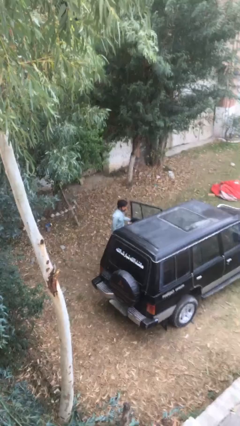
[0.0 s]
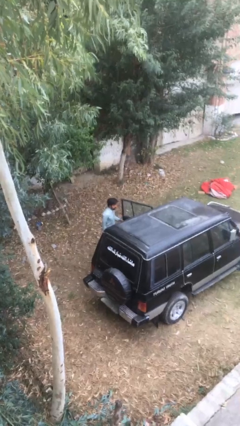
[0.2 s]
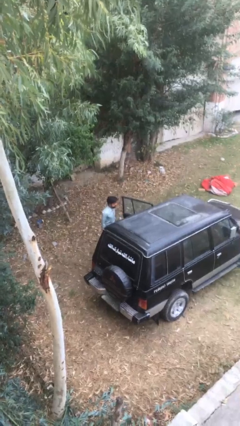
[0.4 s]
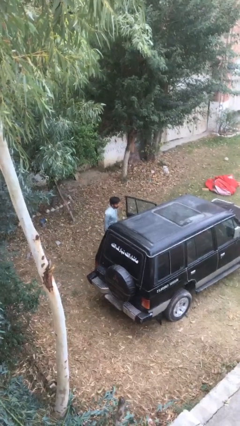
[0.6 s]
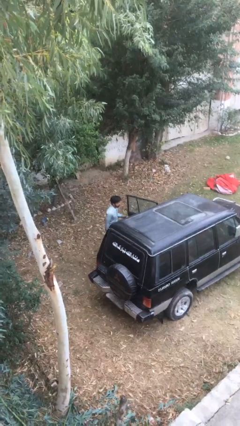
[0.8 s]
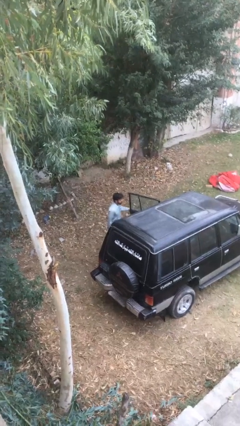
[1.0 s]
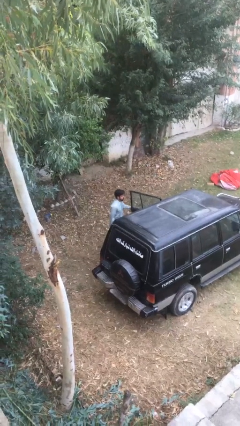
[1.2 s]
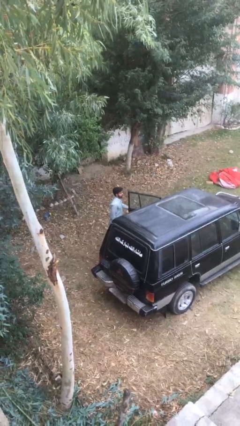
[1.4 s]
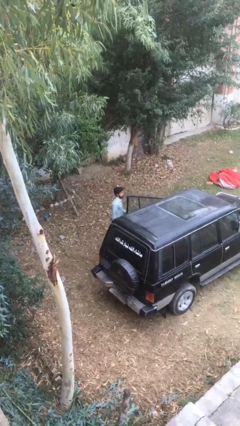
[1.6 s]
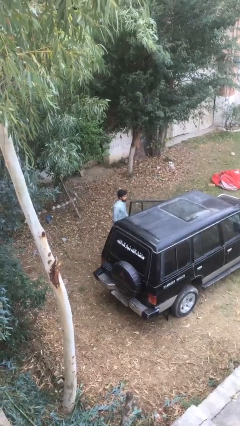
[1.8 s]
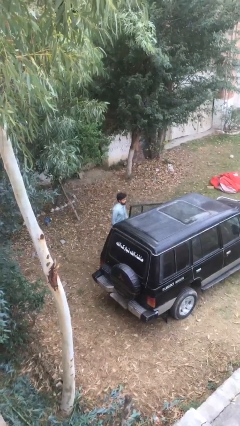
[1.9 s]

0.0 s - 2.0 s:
person opens car door

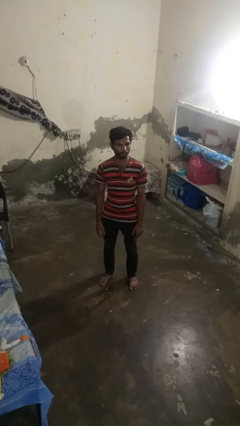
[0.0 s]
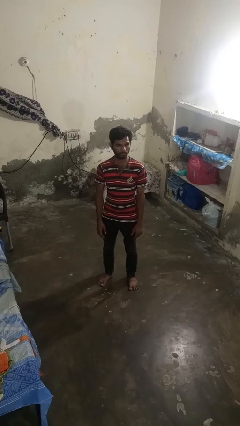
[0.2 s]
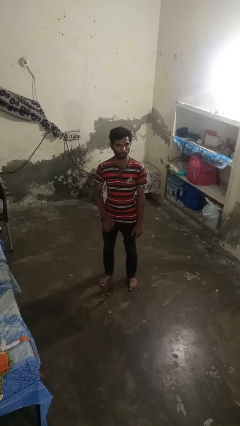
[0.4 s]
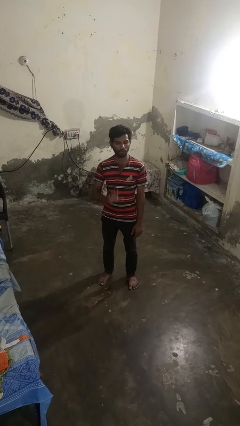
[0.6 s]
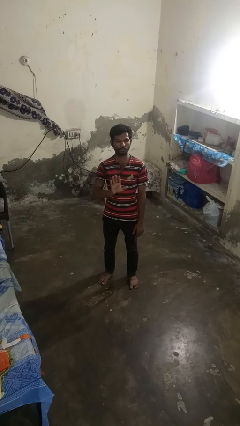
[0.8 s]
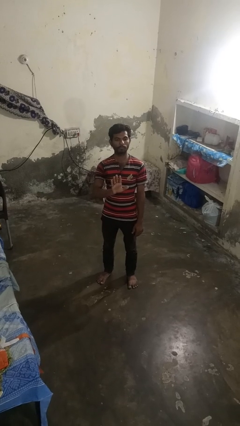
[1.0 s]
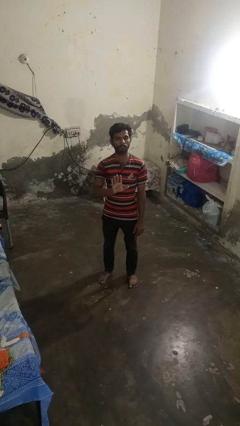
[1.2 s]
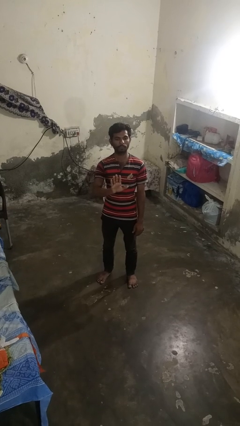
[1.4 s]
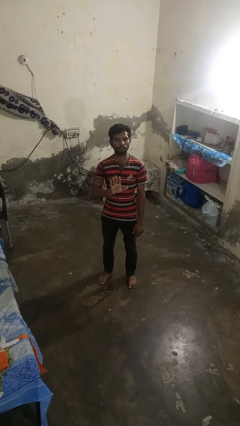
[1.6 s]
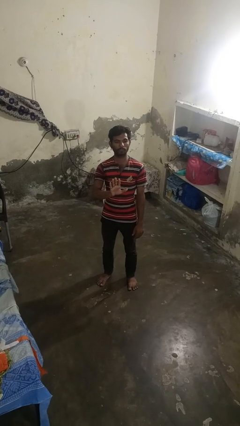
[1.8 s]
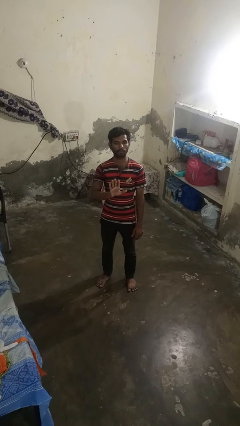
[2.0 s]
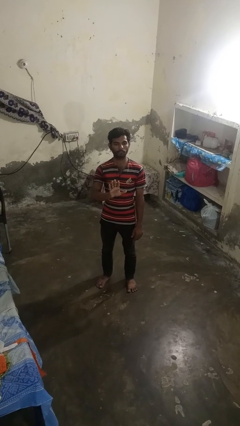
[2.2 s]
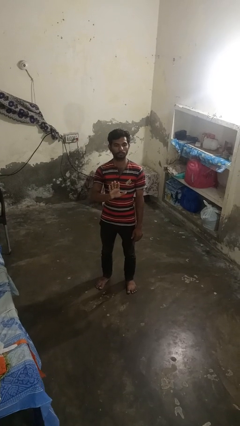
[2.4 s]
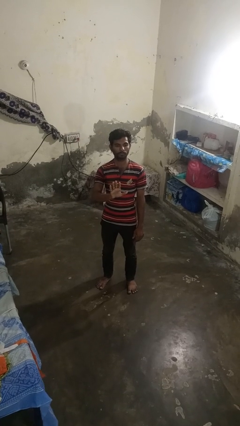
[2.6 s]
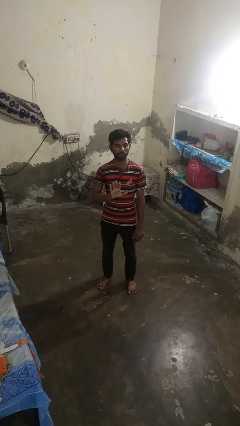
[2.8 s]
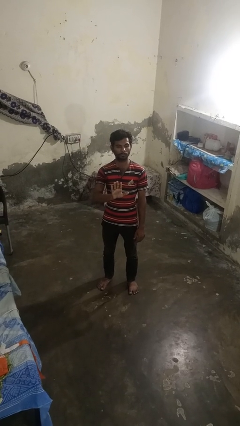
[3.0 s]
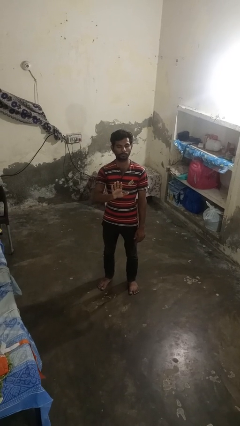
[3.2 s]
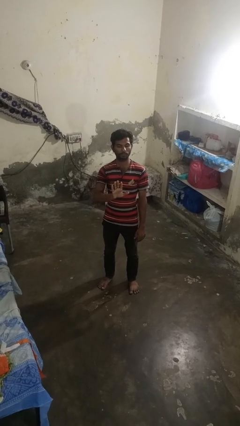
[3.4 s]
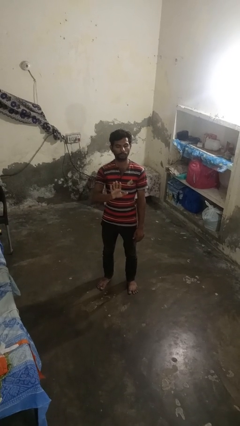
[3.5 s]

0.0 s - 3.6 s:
person gestures stop

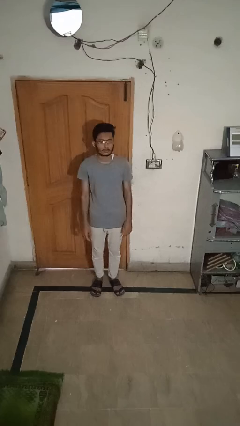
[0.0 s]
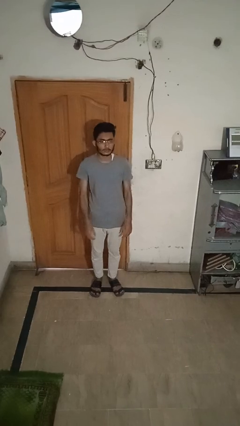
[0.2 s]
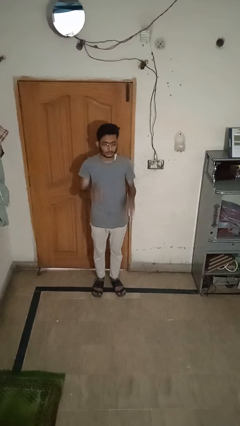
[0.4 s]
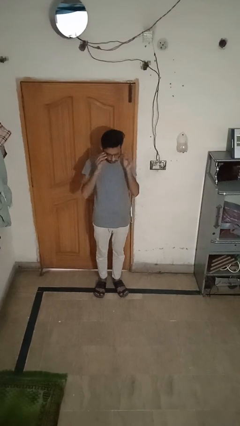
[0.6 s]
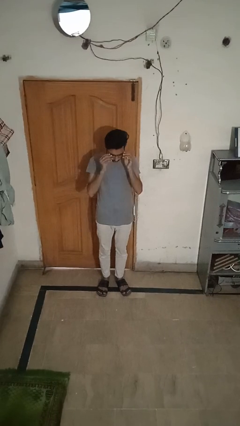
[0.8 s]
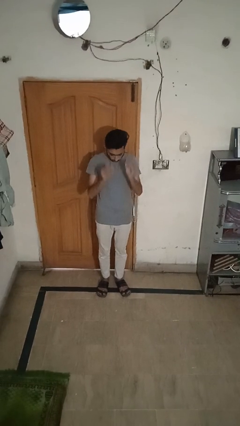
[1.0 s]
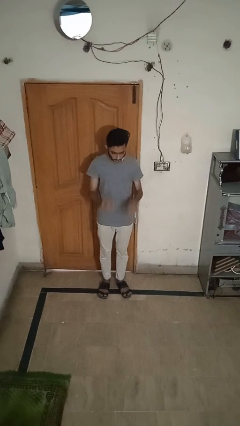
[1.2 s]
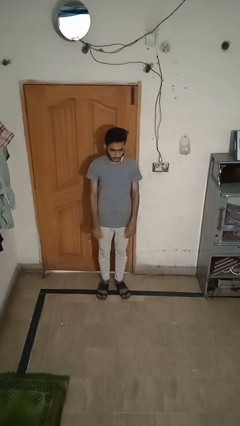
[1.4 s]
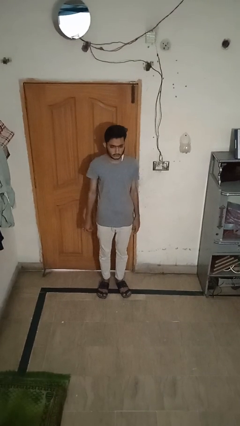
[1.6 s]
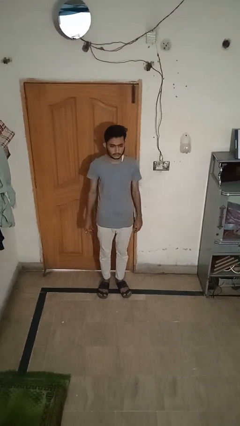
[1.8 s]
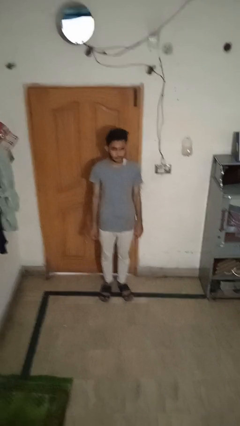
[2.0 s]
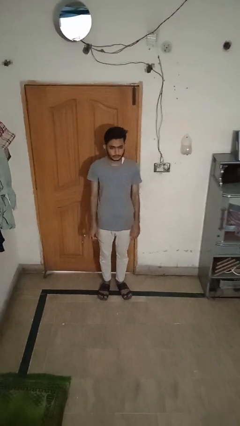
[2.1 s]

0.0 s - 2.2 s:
person takes off glasses

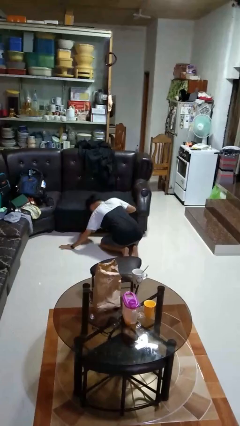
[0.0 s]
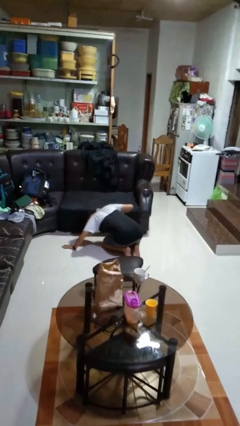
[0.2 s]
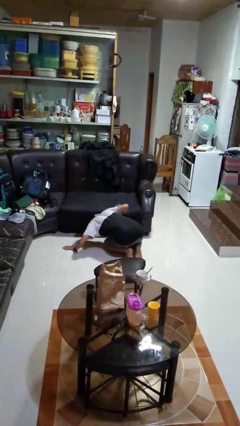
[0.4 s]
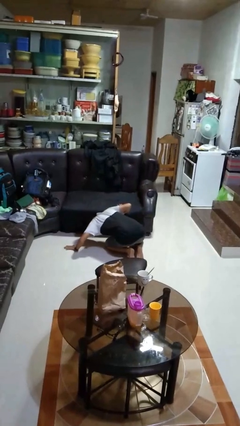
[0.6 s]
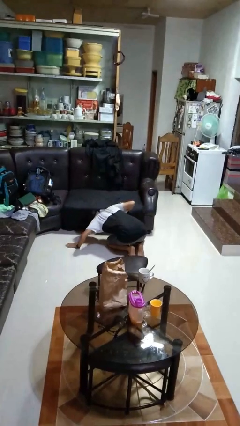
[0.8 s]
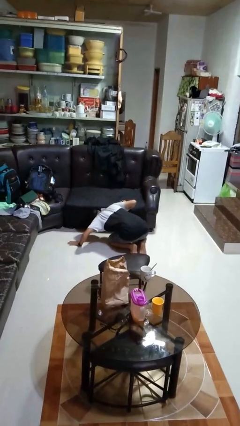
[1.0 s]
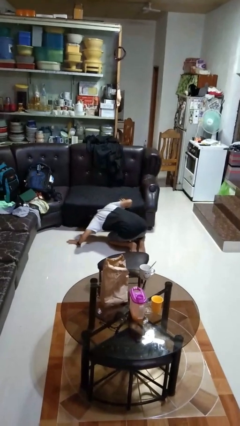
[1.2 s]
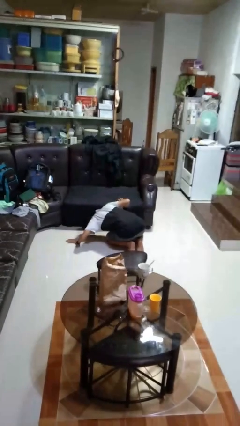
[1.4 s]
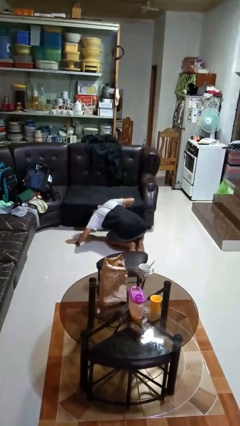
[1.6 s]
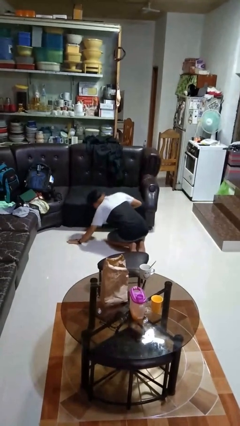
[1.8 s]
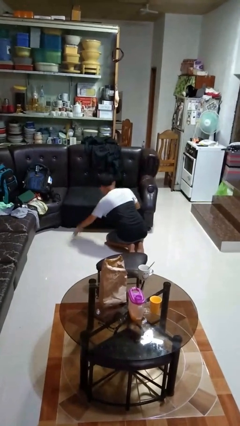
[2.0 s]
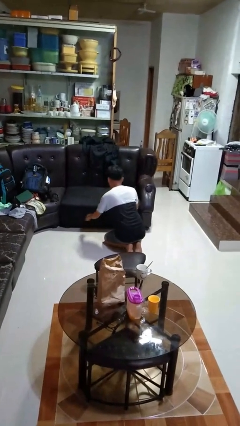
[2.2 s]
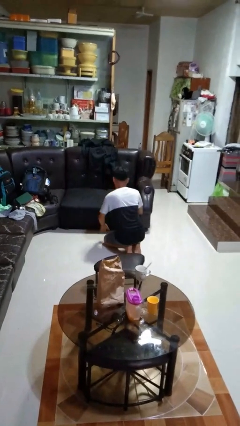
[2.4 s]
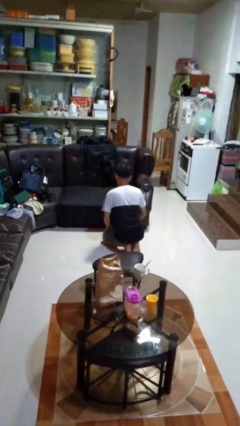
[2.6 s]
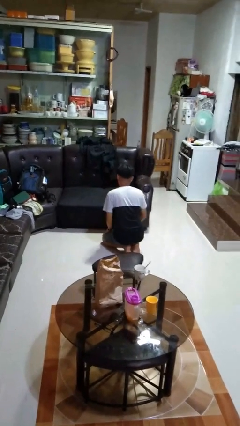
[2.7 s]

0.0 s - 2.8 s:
person searches under couch

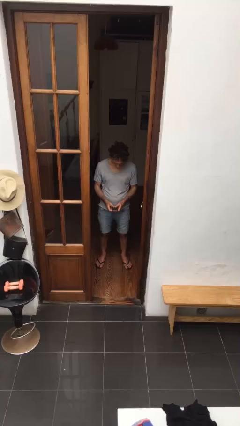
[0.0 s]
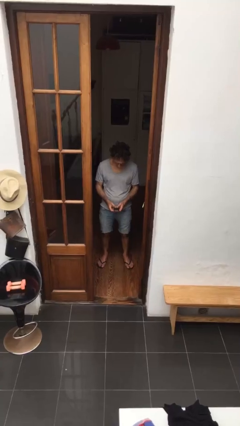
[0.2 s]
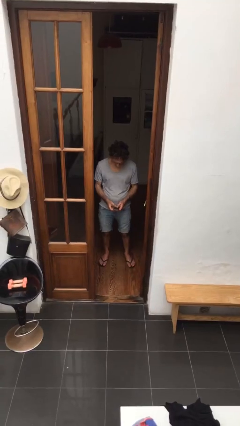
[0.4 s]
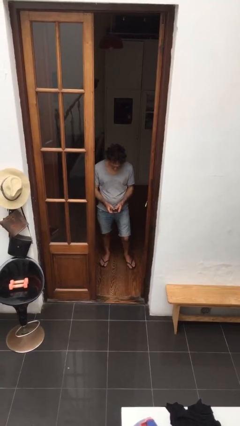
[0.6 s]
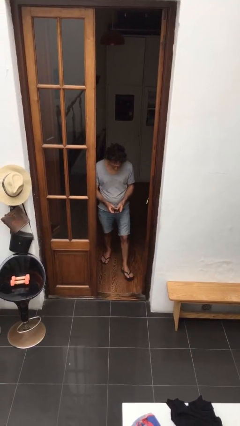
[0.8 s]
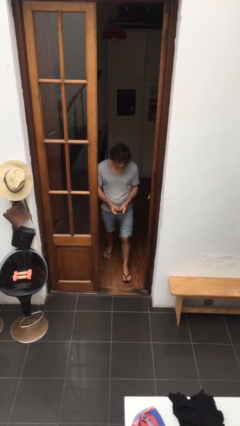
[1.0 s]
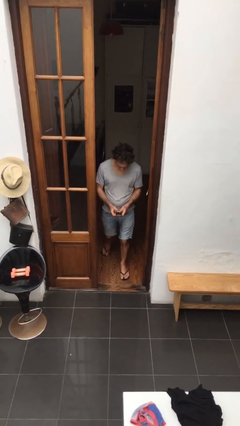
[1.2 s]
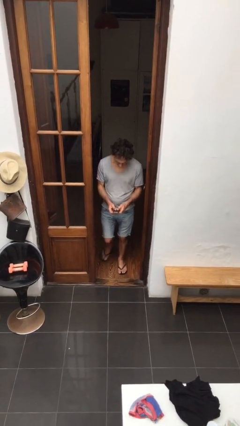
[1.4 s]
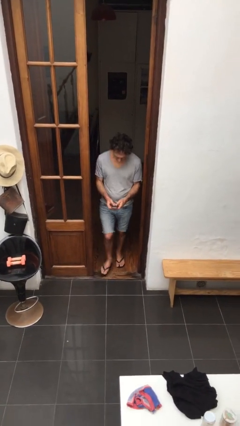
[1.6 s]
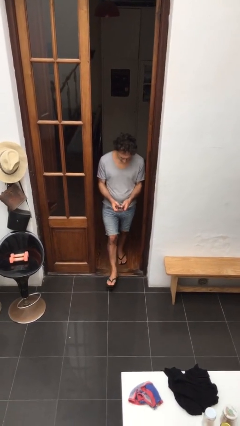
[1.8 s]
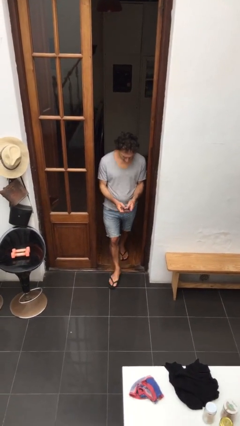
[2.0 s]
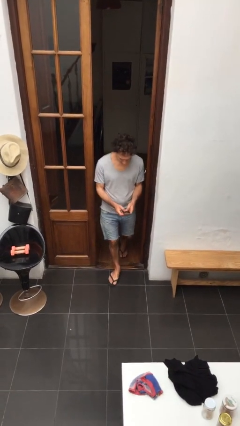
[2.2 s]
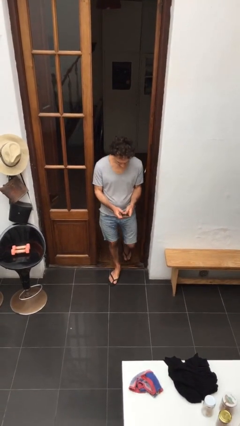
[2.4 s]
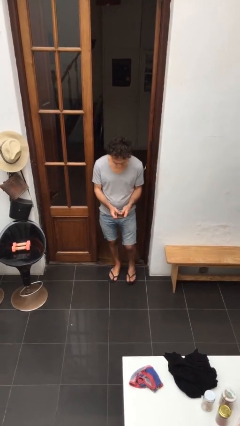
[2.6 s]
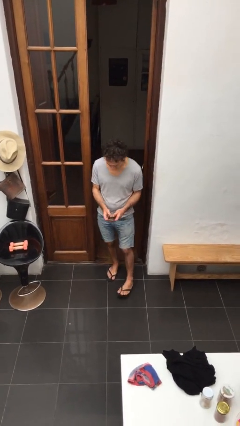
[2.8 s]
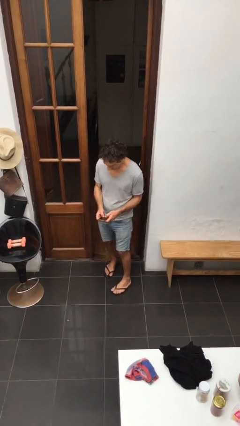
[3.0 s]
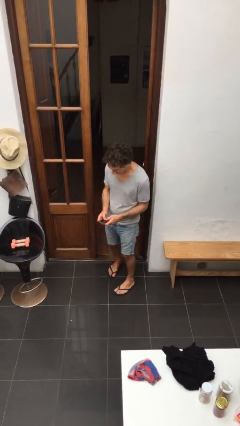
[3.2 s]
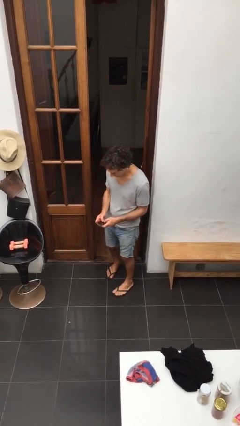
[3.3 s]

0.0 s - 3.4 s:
person enters scene through structure

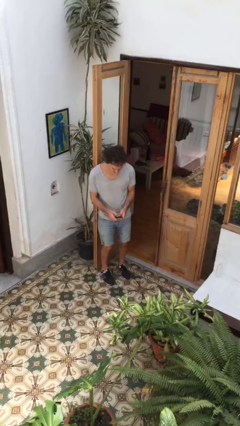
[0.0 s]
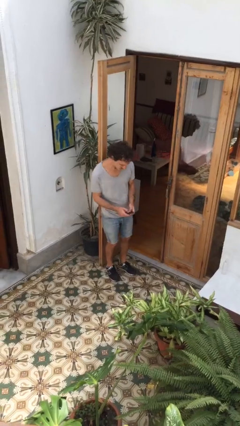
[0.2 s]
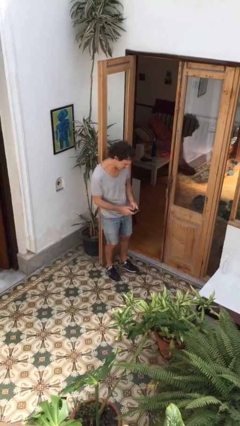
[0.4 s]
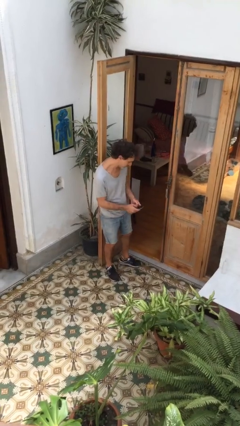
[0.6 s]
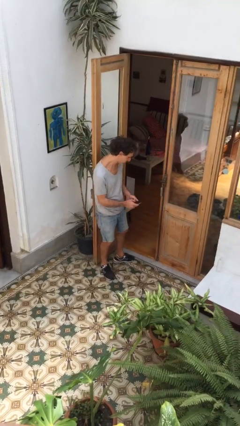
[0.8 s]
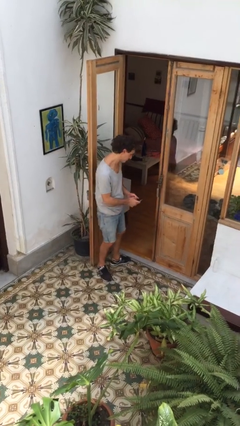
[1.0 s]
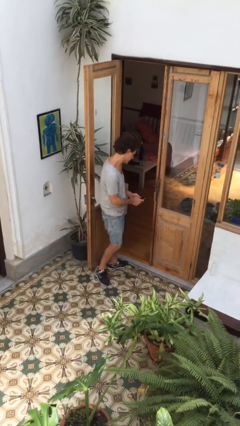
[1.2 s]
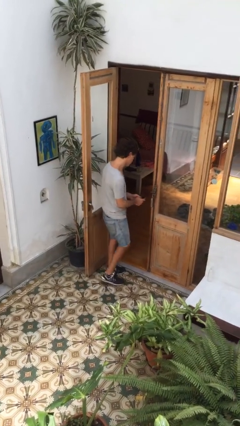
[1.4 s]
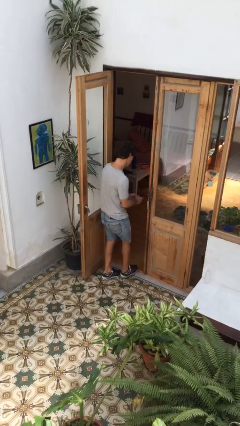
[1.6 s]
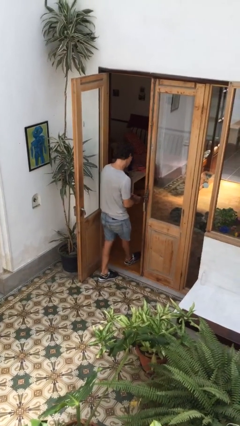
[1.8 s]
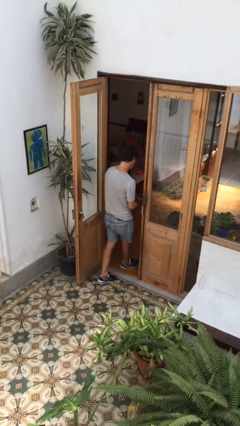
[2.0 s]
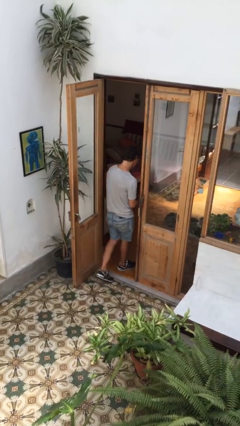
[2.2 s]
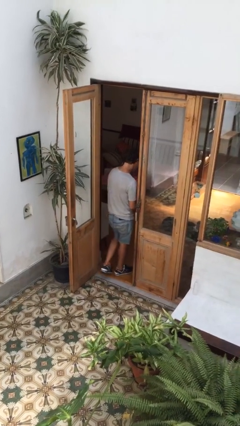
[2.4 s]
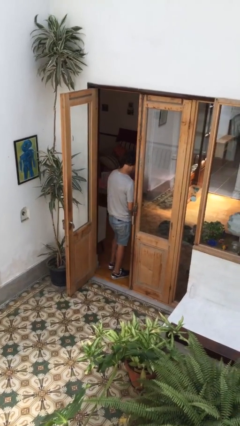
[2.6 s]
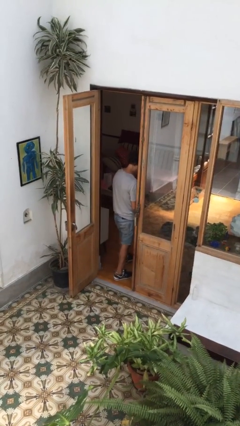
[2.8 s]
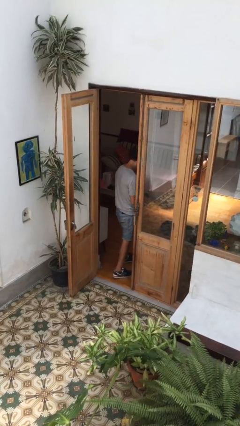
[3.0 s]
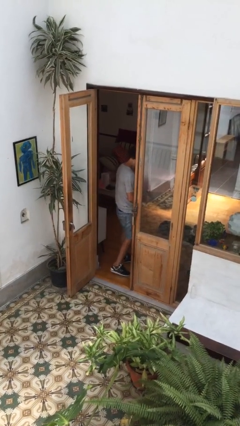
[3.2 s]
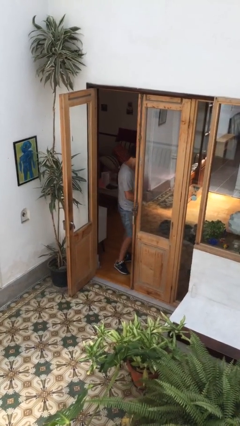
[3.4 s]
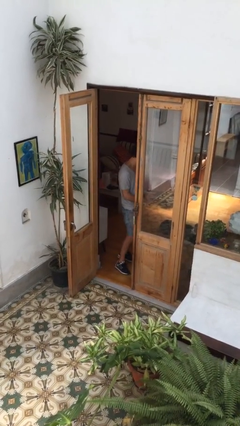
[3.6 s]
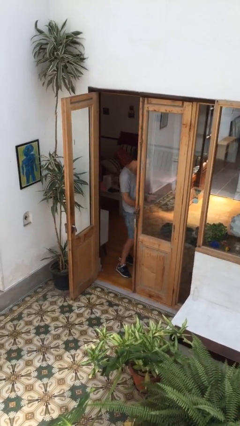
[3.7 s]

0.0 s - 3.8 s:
person exits scene through structure
